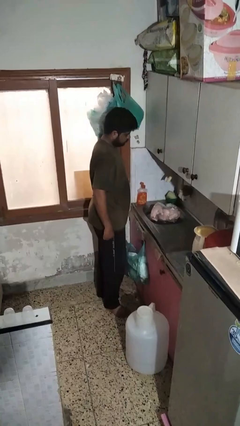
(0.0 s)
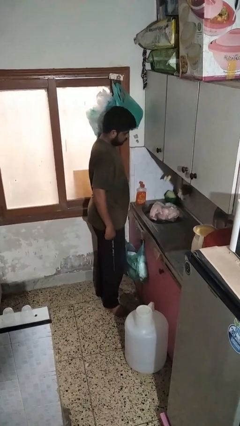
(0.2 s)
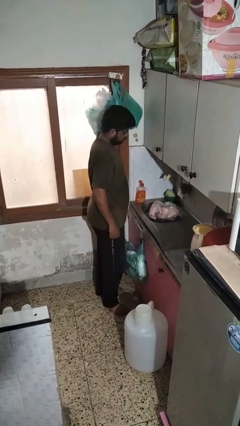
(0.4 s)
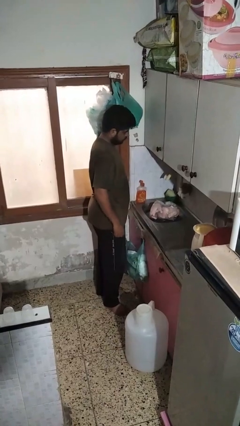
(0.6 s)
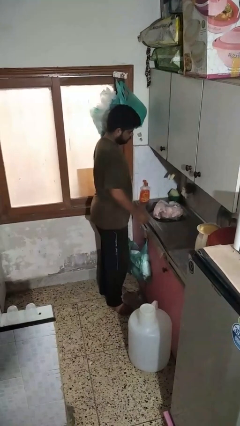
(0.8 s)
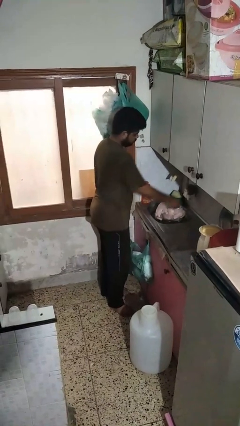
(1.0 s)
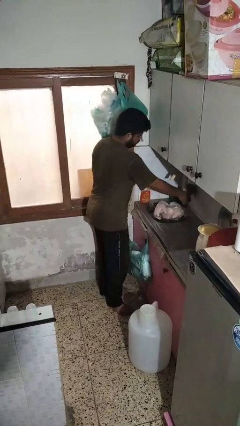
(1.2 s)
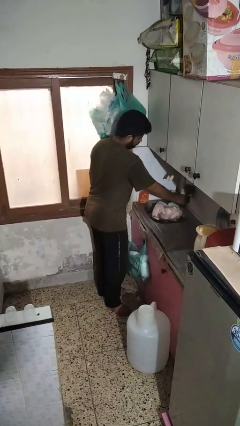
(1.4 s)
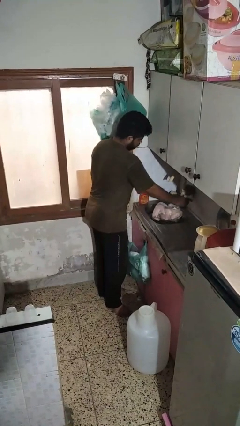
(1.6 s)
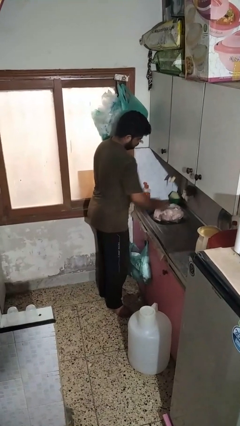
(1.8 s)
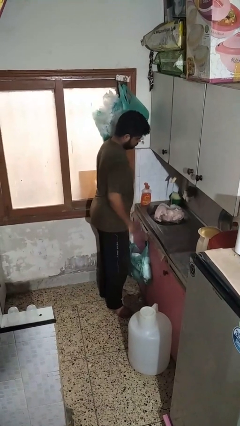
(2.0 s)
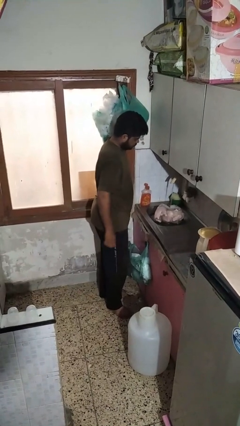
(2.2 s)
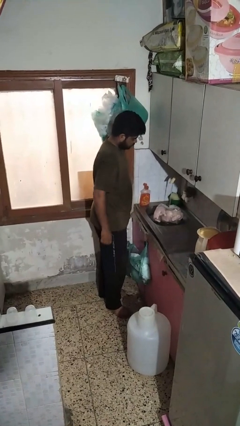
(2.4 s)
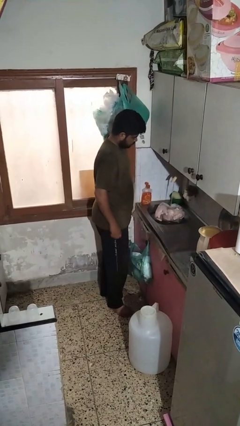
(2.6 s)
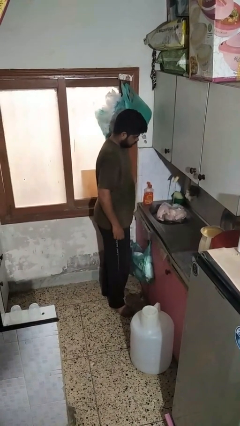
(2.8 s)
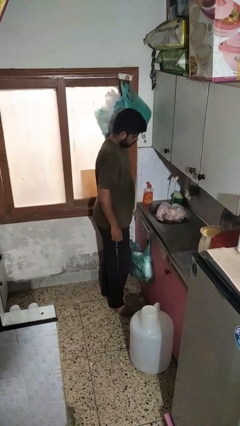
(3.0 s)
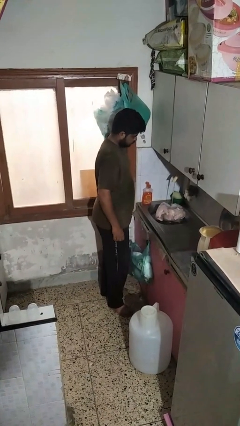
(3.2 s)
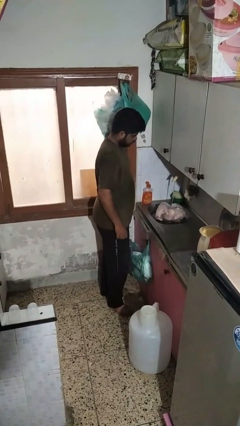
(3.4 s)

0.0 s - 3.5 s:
person turns on faucet

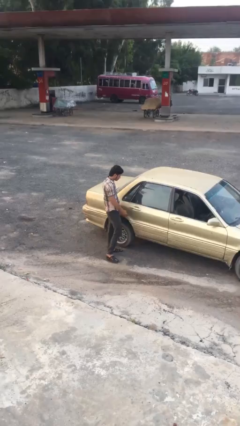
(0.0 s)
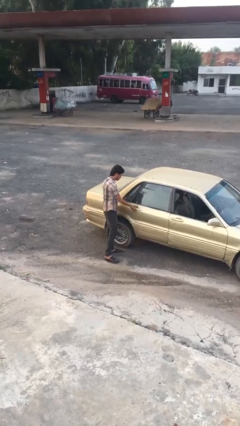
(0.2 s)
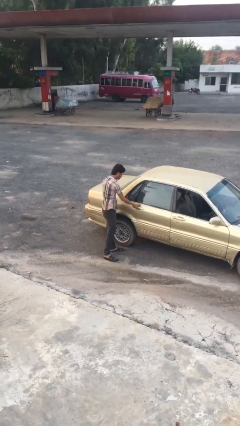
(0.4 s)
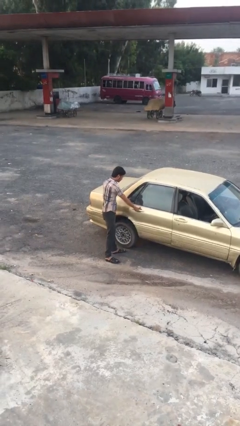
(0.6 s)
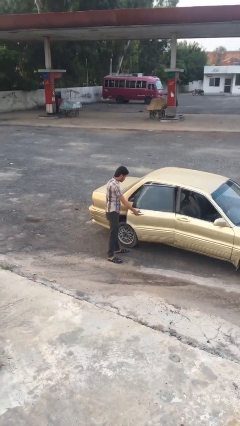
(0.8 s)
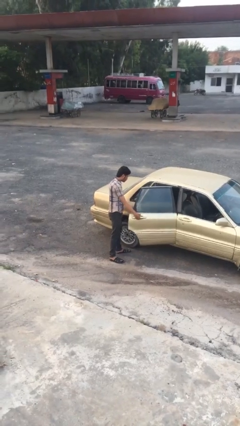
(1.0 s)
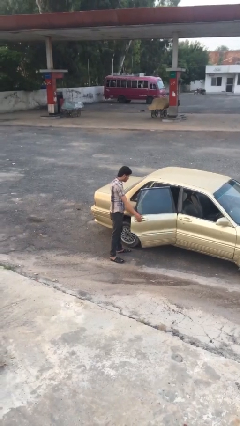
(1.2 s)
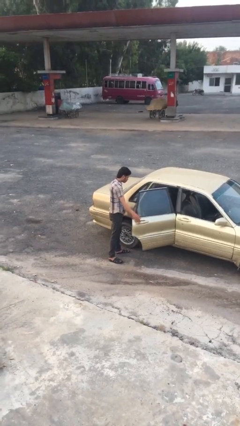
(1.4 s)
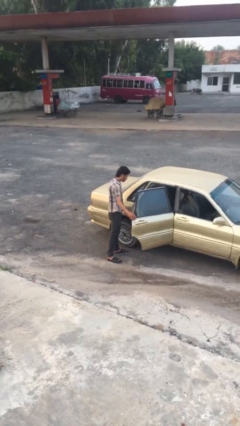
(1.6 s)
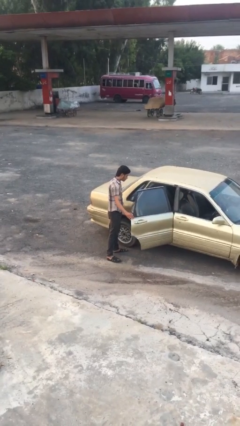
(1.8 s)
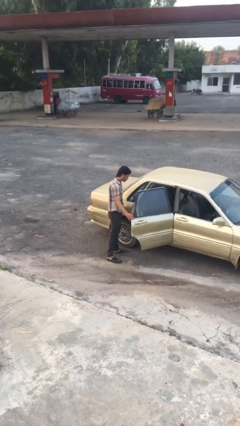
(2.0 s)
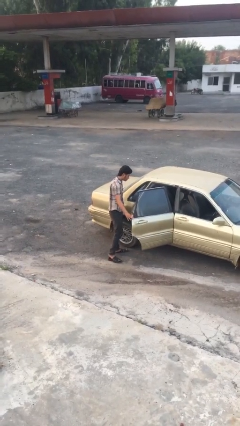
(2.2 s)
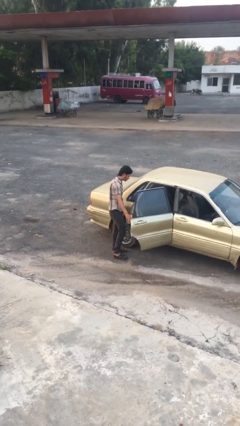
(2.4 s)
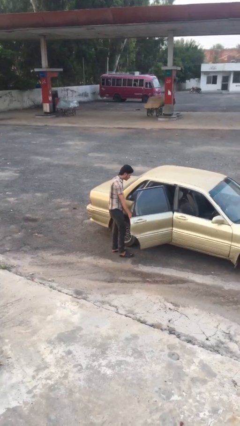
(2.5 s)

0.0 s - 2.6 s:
person opens car door

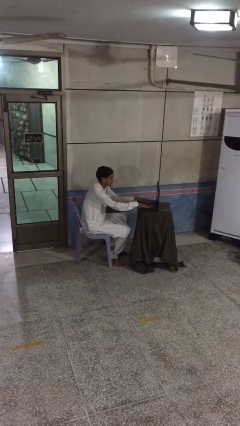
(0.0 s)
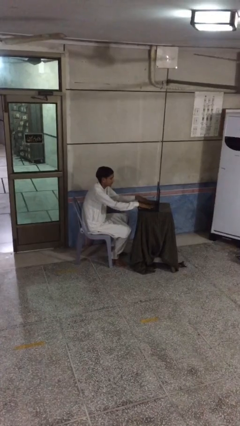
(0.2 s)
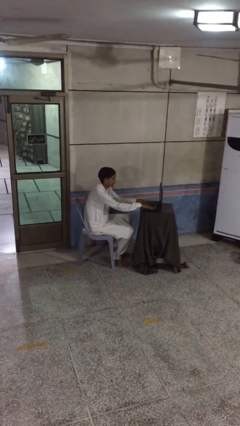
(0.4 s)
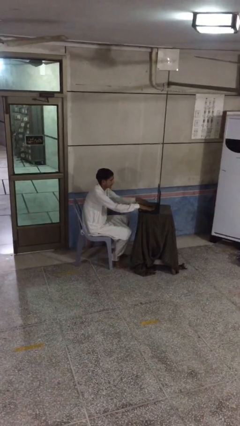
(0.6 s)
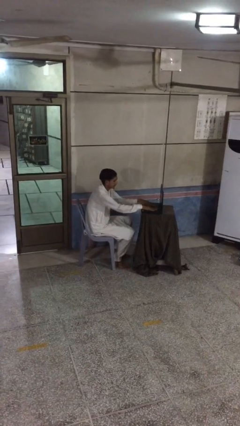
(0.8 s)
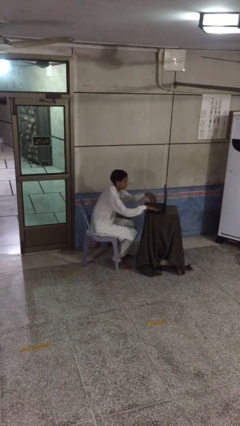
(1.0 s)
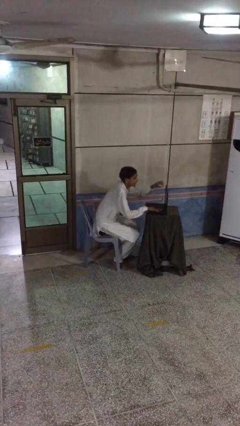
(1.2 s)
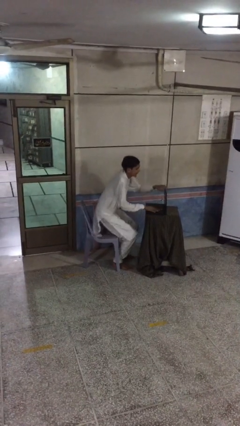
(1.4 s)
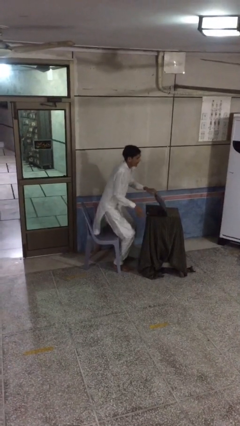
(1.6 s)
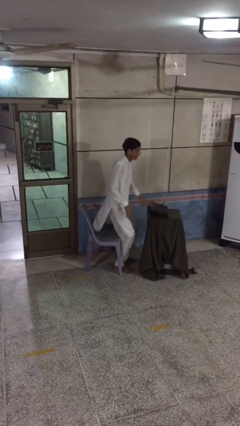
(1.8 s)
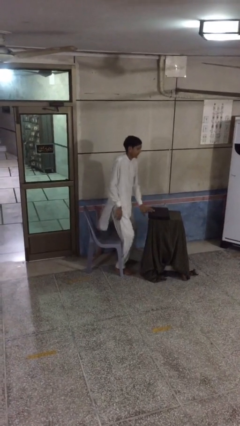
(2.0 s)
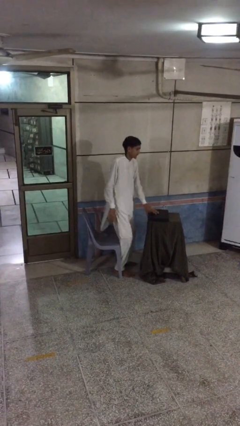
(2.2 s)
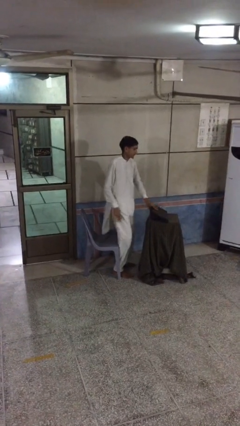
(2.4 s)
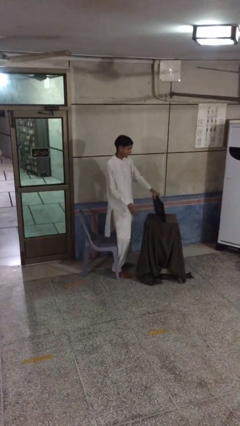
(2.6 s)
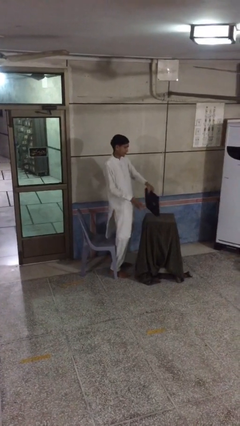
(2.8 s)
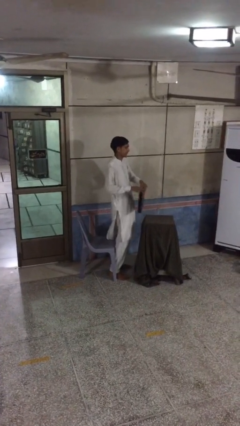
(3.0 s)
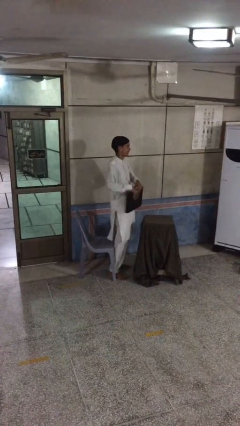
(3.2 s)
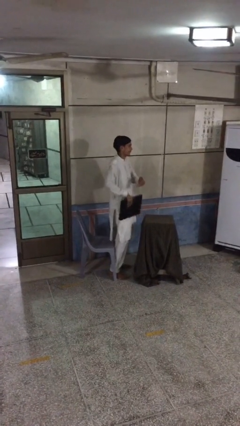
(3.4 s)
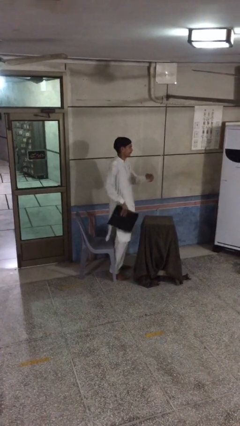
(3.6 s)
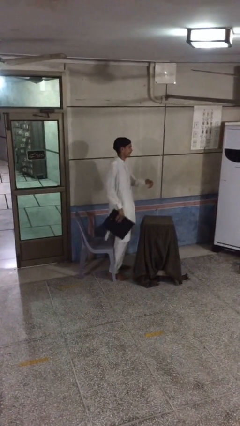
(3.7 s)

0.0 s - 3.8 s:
person stands up

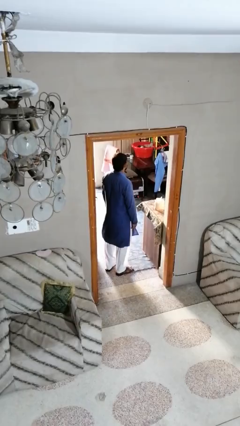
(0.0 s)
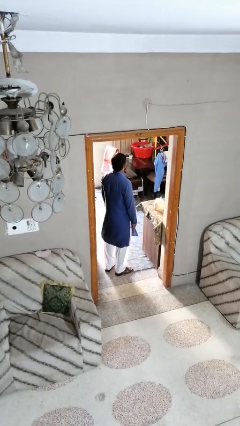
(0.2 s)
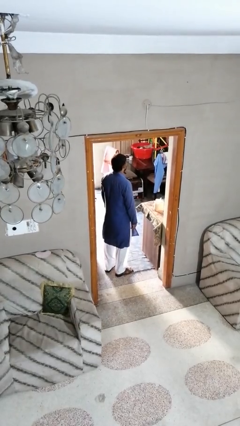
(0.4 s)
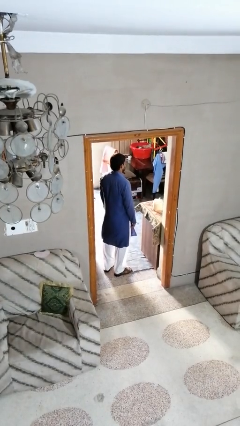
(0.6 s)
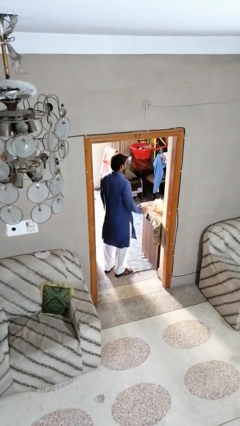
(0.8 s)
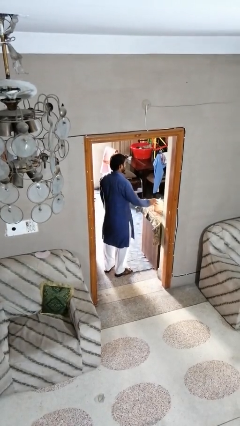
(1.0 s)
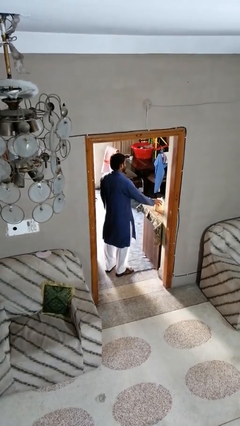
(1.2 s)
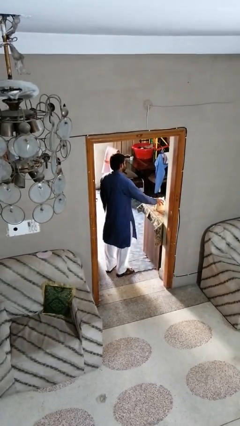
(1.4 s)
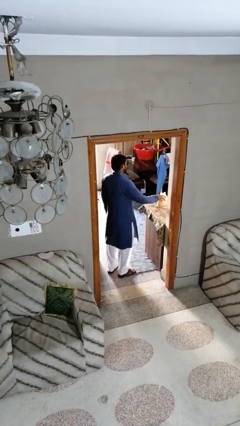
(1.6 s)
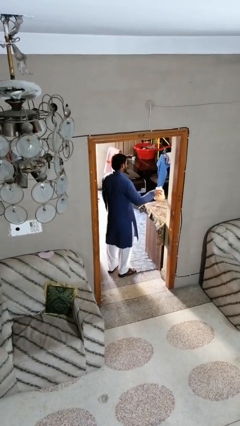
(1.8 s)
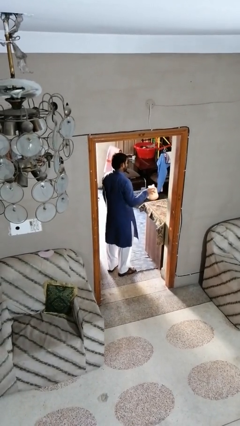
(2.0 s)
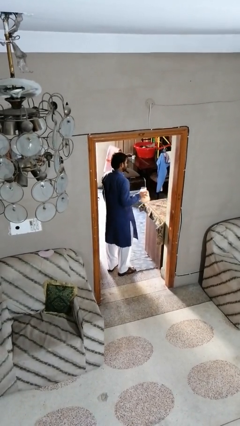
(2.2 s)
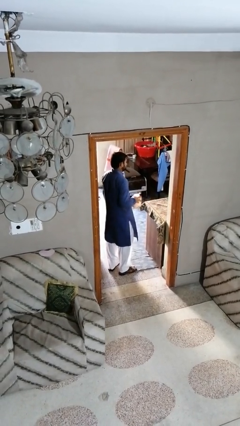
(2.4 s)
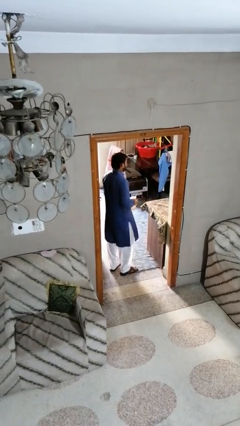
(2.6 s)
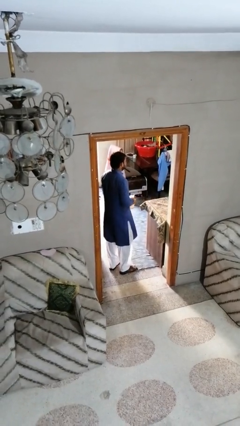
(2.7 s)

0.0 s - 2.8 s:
person picks up object from countertop

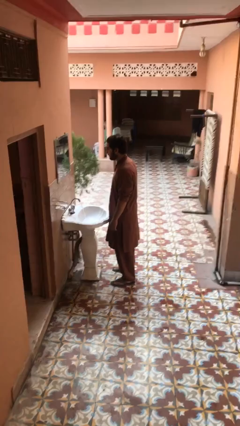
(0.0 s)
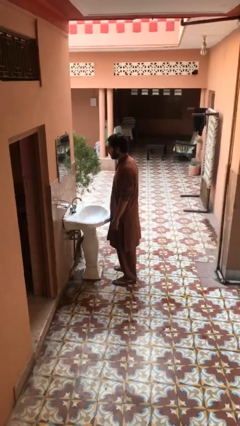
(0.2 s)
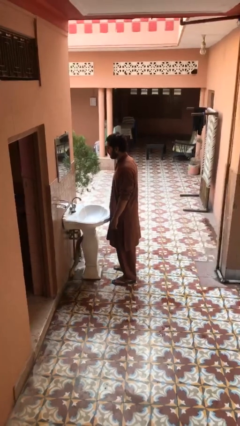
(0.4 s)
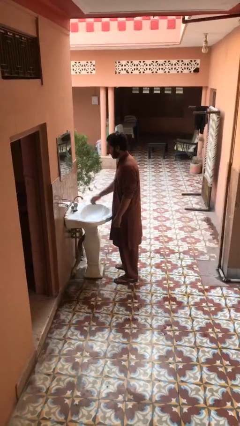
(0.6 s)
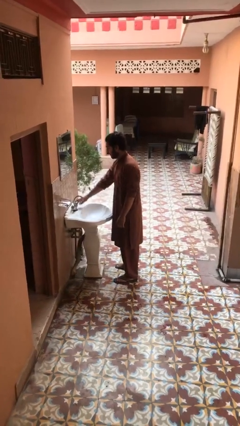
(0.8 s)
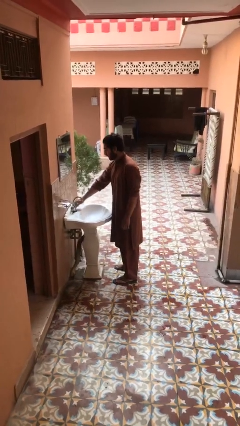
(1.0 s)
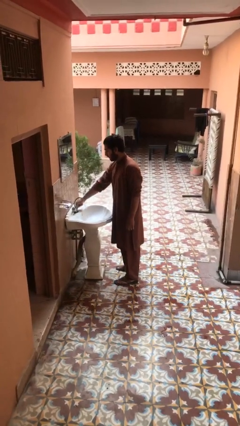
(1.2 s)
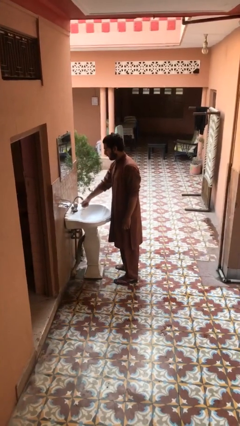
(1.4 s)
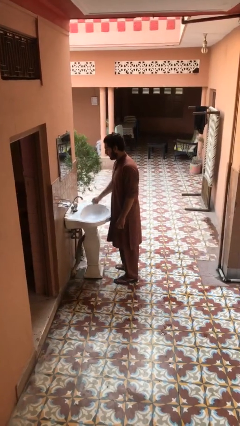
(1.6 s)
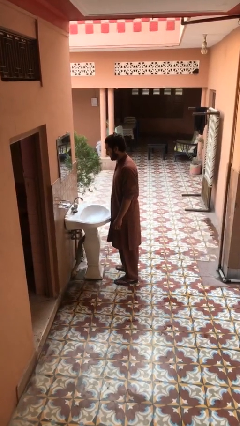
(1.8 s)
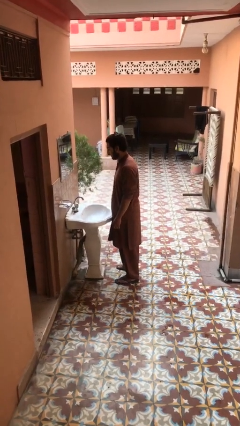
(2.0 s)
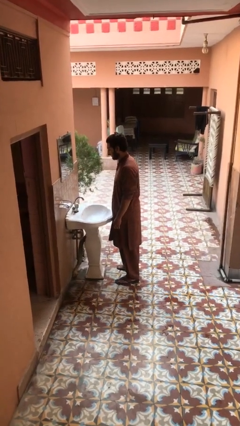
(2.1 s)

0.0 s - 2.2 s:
person turns off faucet

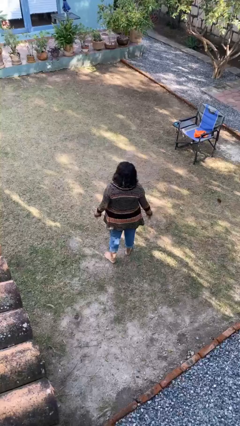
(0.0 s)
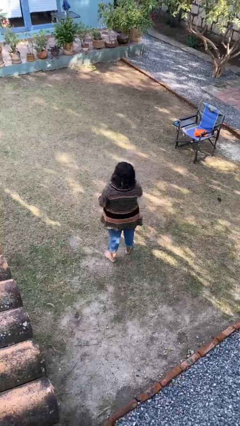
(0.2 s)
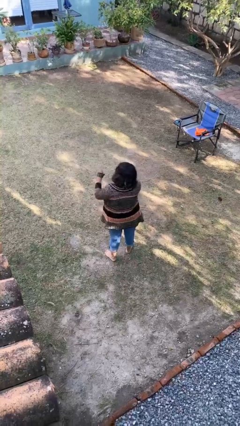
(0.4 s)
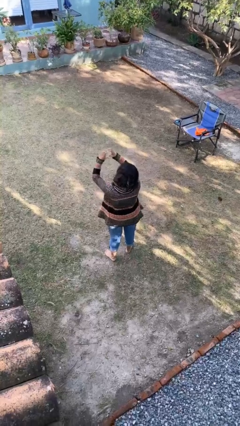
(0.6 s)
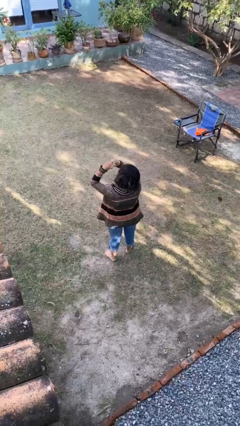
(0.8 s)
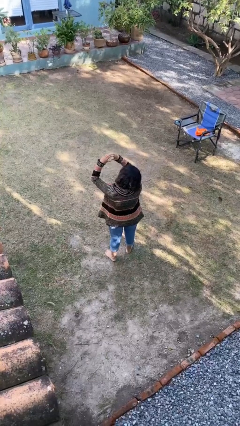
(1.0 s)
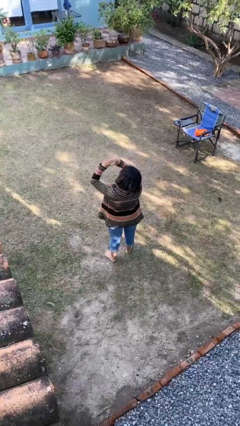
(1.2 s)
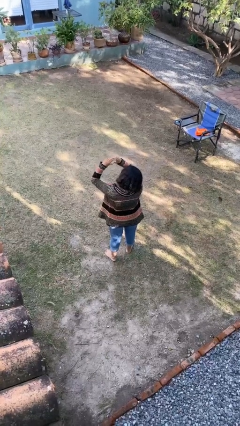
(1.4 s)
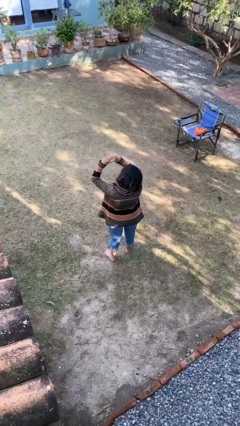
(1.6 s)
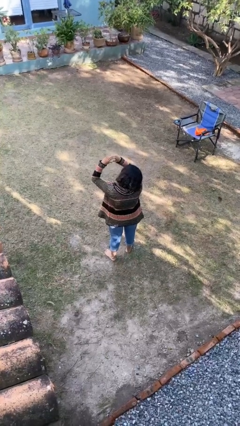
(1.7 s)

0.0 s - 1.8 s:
person gestures heart

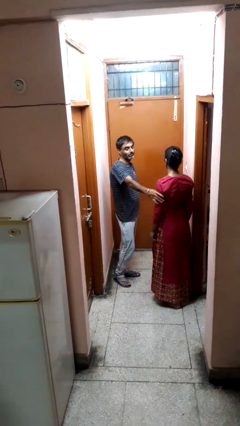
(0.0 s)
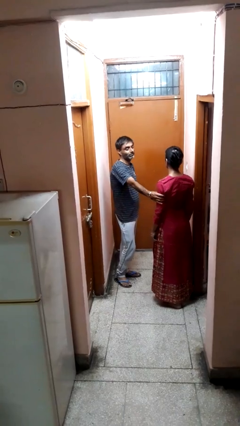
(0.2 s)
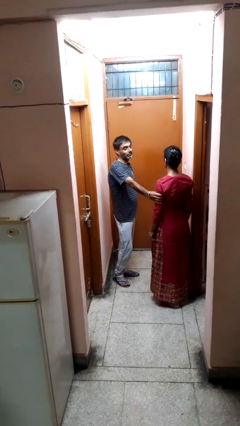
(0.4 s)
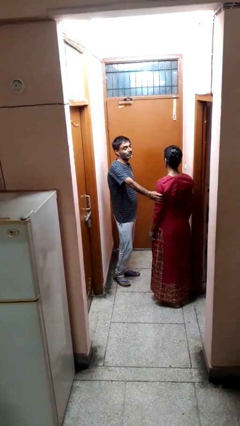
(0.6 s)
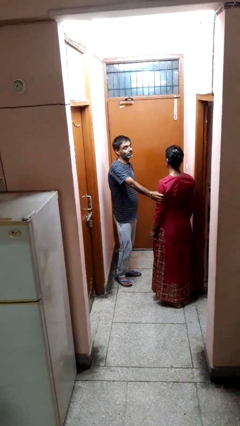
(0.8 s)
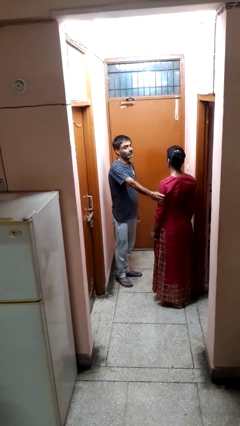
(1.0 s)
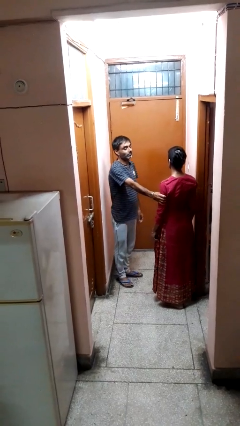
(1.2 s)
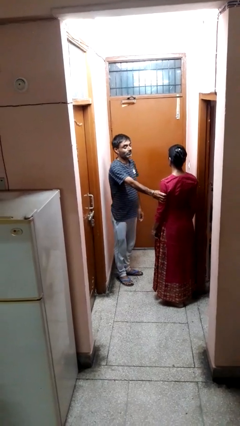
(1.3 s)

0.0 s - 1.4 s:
person grabs person by bicep
